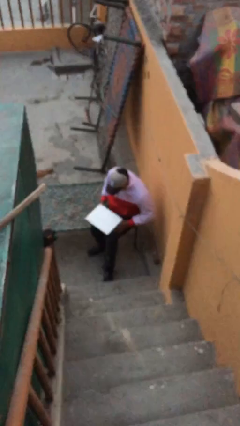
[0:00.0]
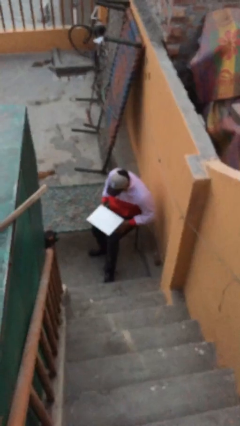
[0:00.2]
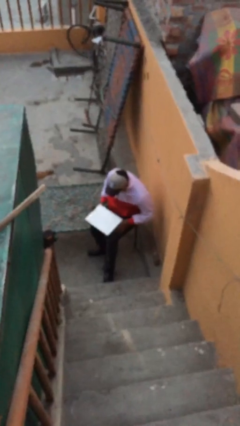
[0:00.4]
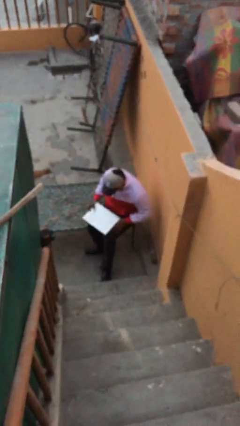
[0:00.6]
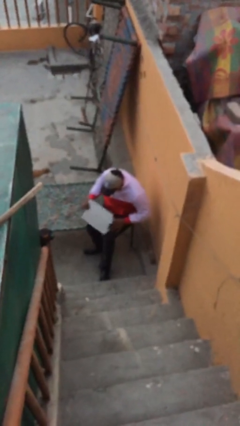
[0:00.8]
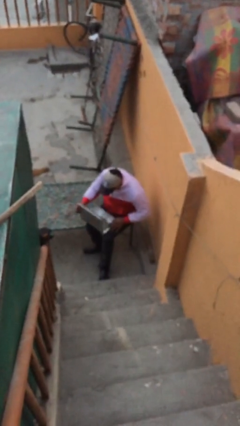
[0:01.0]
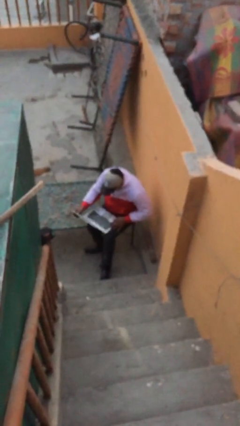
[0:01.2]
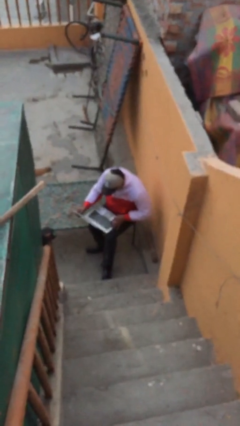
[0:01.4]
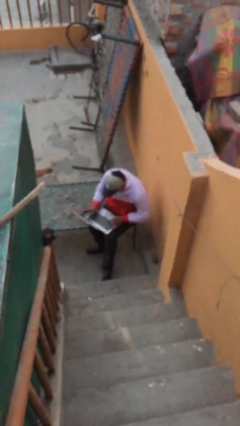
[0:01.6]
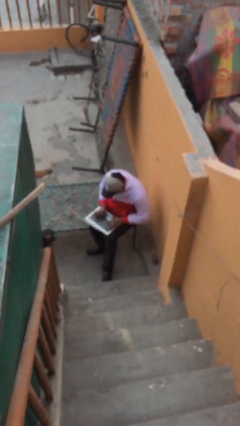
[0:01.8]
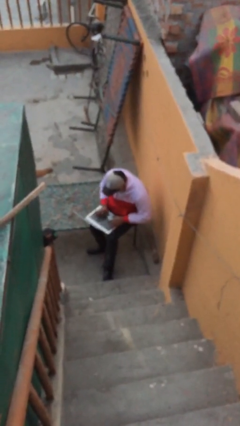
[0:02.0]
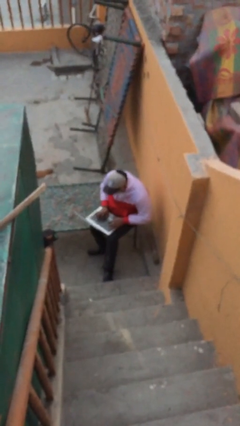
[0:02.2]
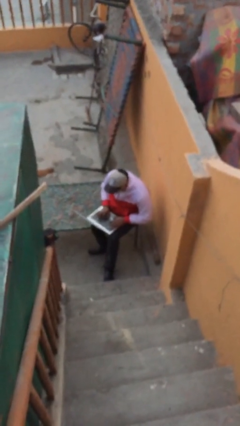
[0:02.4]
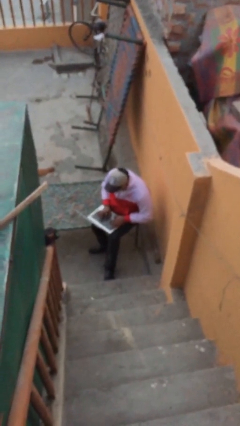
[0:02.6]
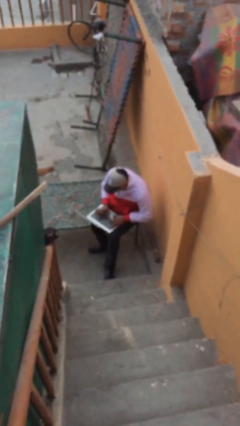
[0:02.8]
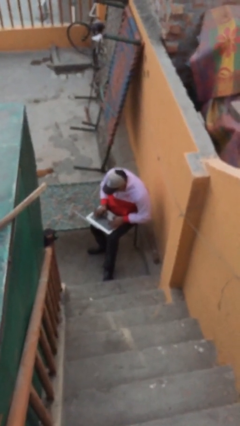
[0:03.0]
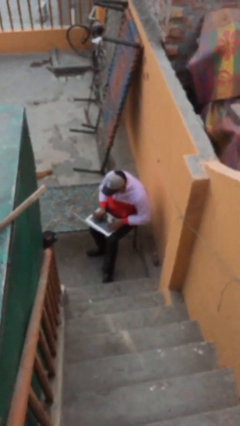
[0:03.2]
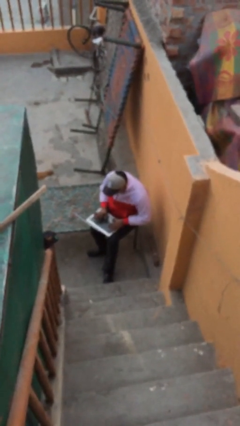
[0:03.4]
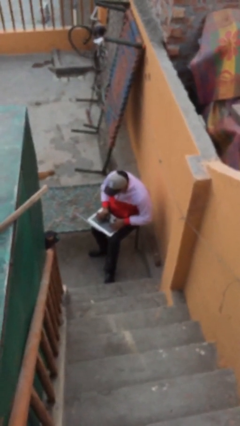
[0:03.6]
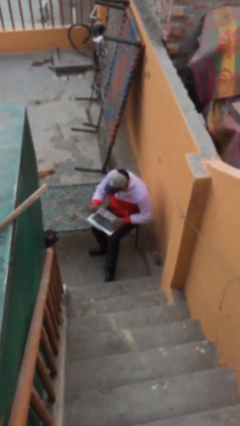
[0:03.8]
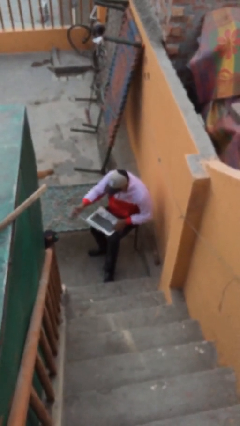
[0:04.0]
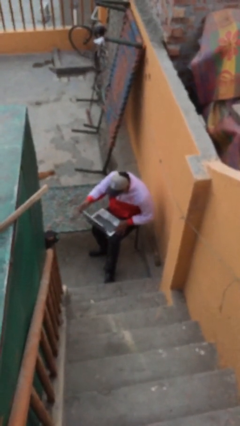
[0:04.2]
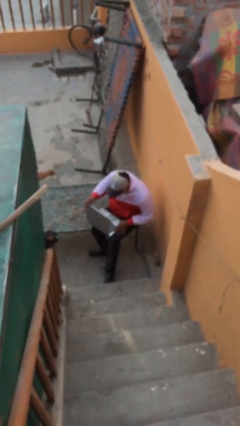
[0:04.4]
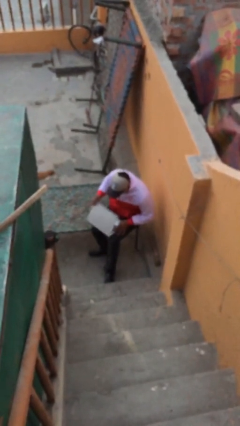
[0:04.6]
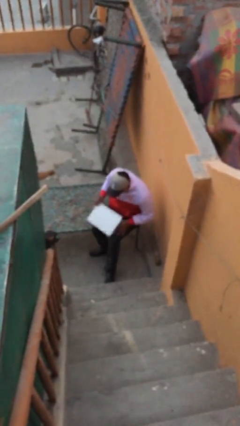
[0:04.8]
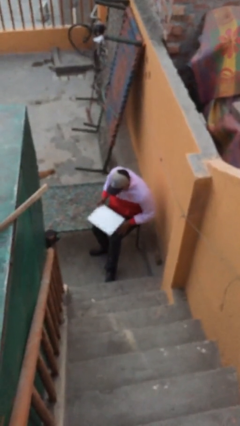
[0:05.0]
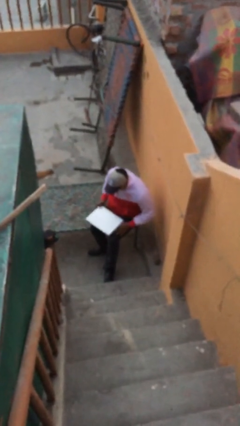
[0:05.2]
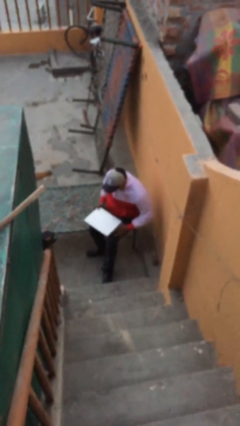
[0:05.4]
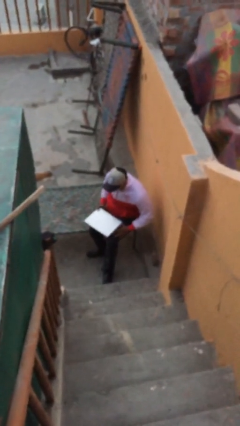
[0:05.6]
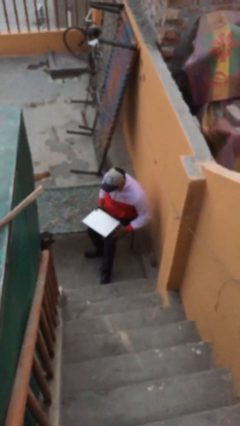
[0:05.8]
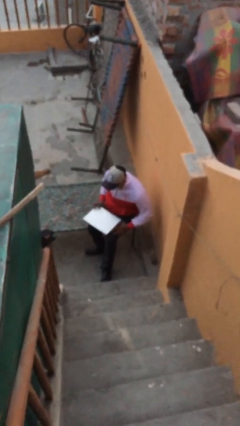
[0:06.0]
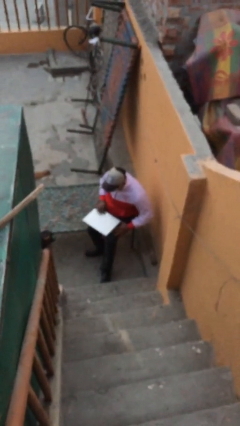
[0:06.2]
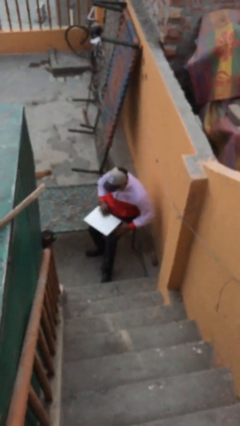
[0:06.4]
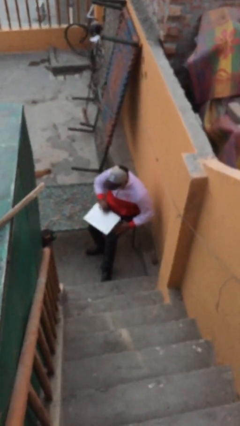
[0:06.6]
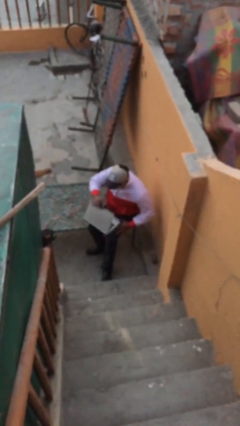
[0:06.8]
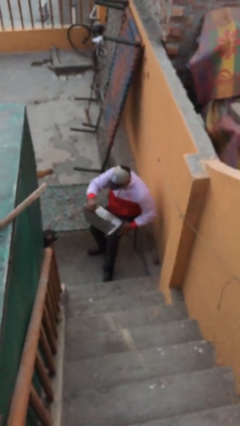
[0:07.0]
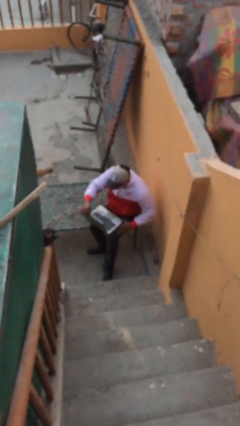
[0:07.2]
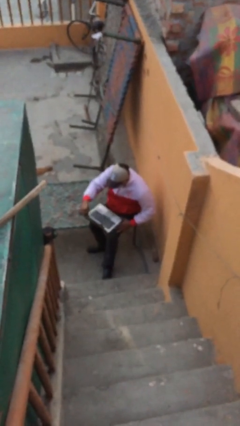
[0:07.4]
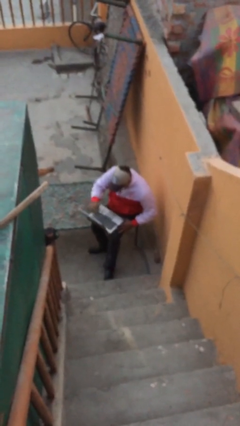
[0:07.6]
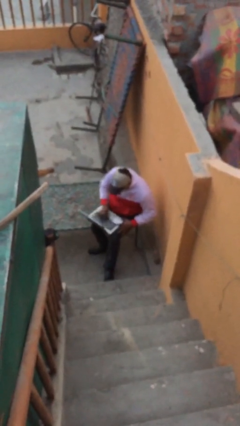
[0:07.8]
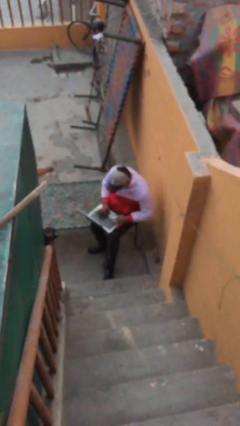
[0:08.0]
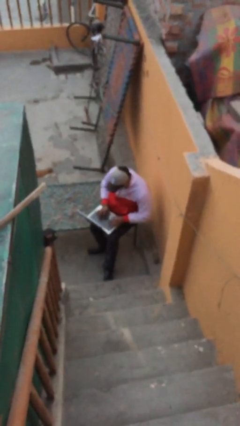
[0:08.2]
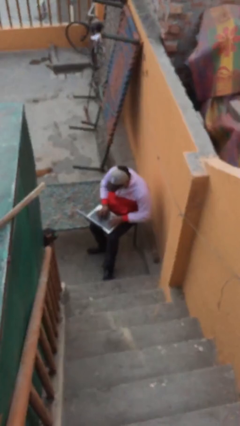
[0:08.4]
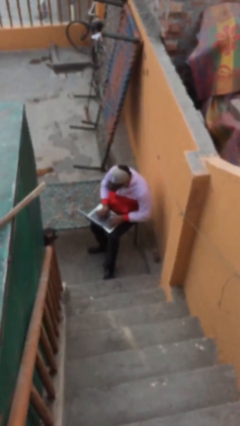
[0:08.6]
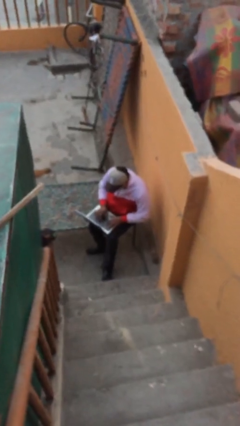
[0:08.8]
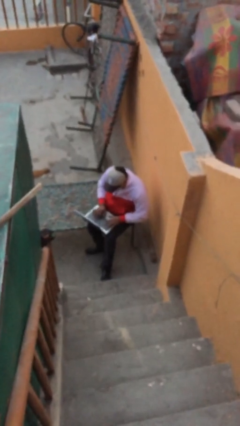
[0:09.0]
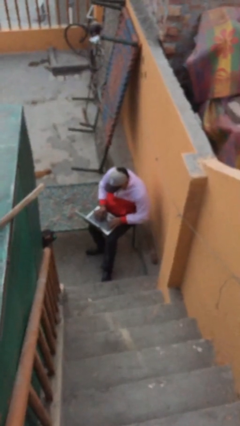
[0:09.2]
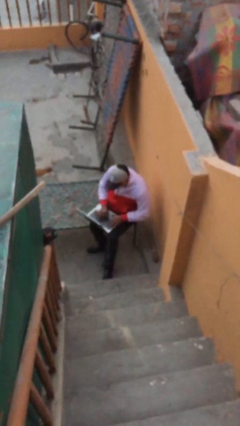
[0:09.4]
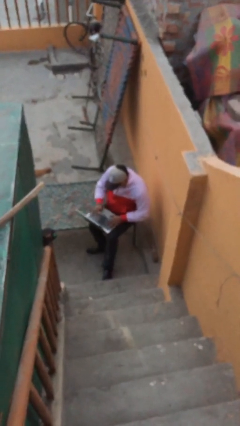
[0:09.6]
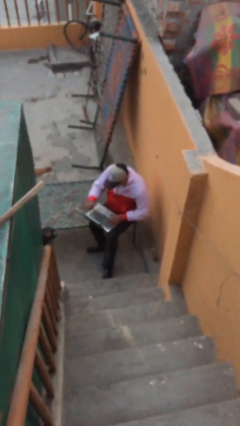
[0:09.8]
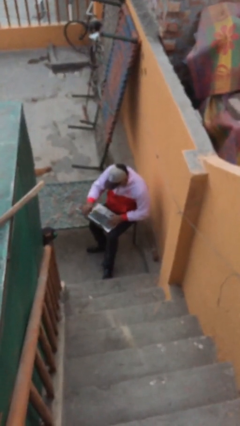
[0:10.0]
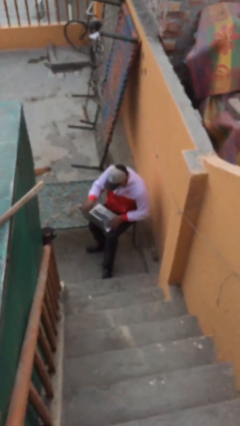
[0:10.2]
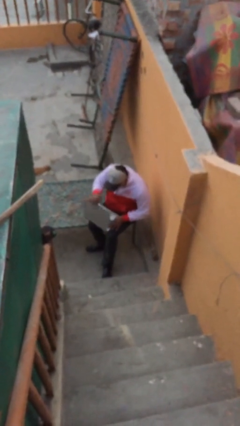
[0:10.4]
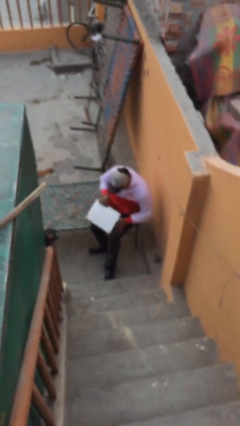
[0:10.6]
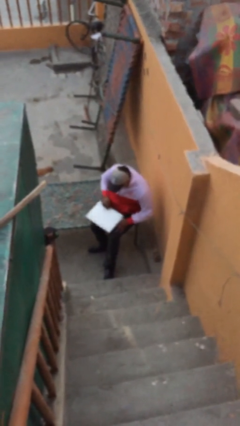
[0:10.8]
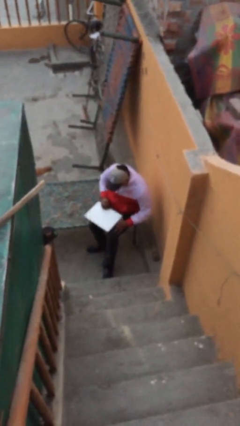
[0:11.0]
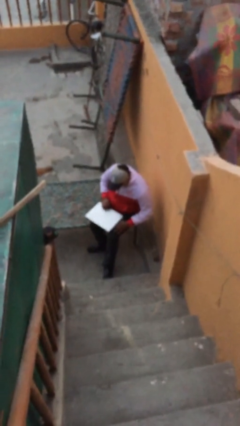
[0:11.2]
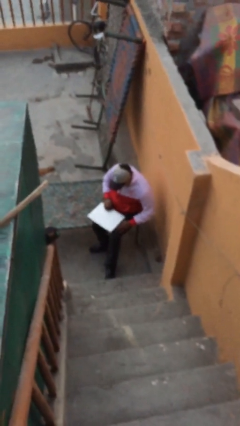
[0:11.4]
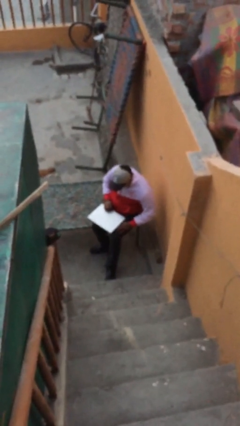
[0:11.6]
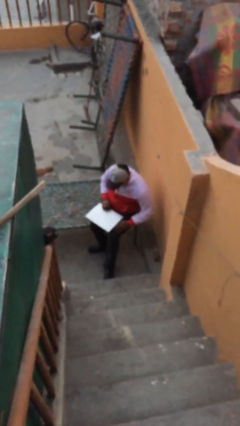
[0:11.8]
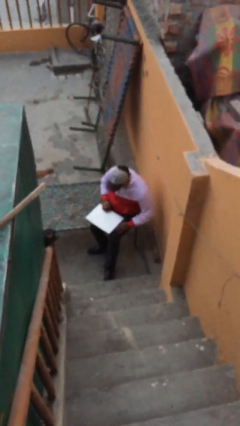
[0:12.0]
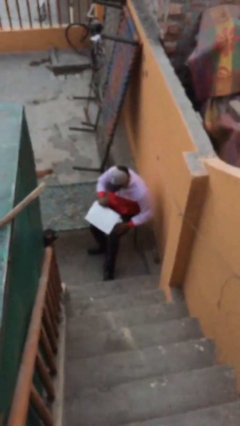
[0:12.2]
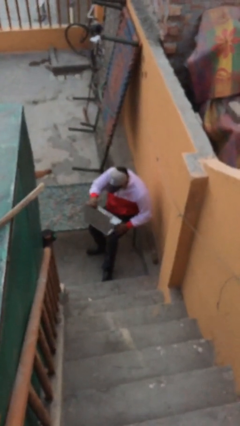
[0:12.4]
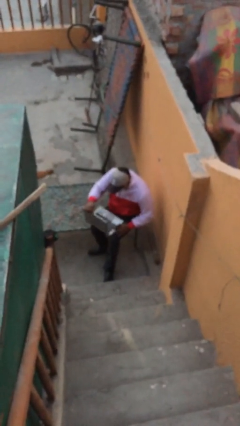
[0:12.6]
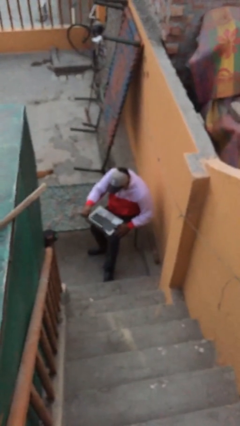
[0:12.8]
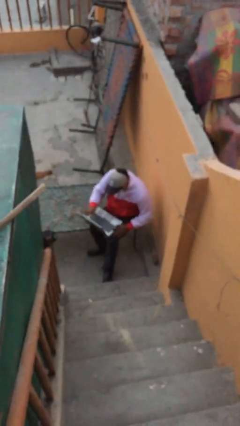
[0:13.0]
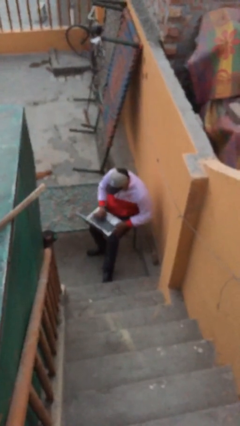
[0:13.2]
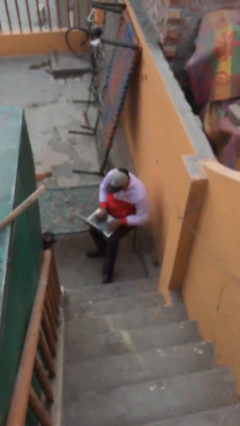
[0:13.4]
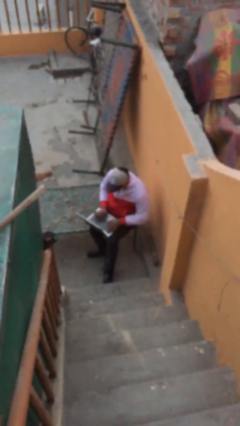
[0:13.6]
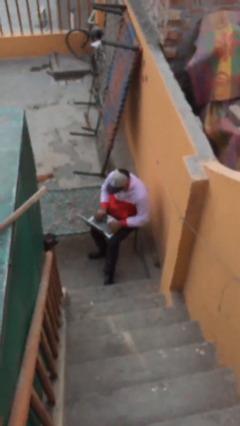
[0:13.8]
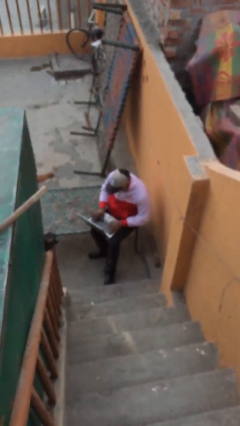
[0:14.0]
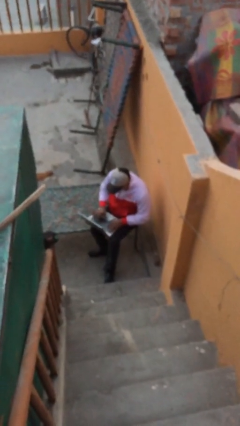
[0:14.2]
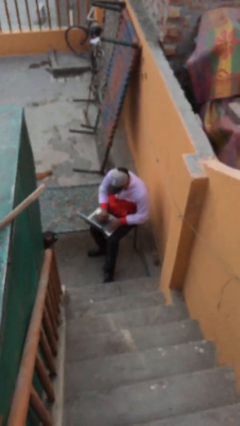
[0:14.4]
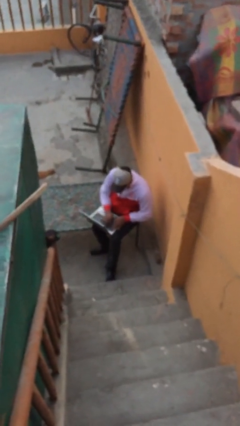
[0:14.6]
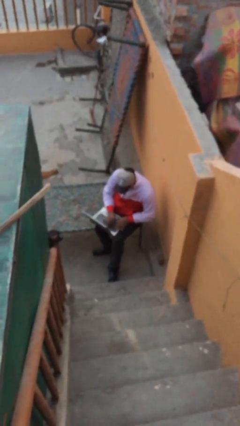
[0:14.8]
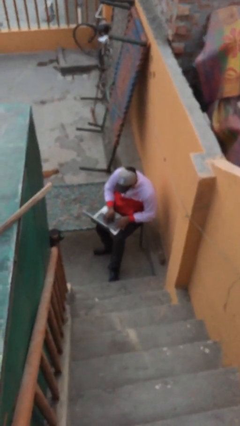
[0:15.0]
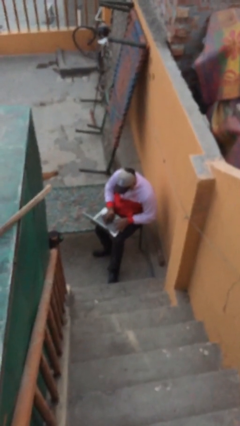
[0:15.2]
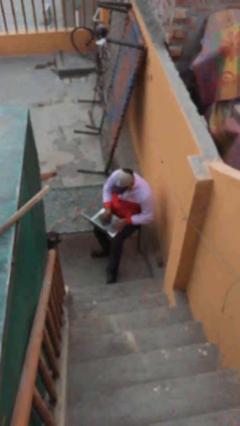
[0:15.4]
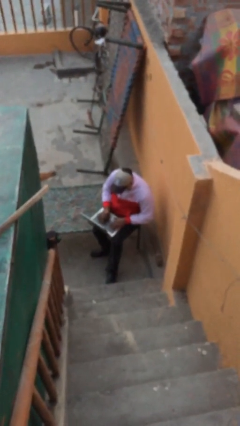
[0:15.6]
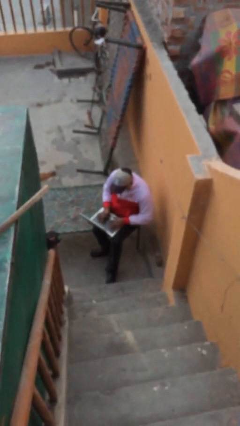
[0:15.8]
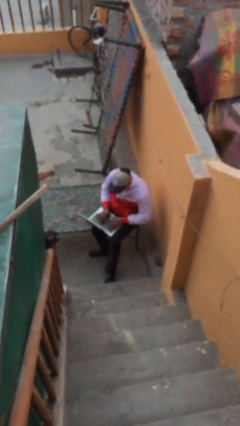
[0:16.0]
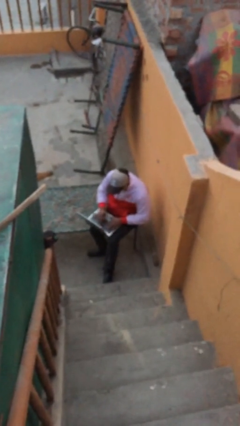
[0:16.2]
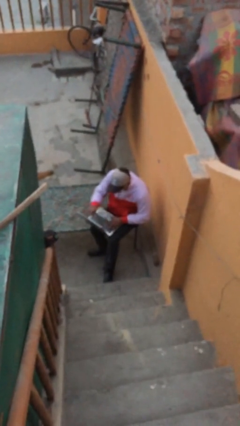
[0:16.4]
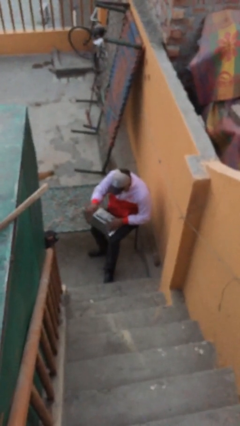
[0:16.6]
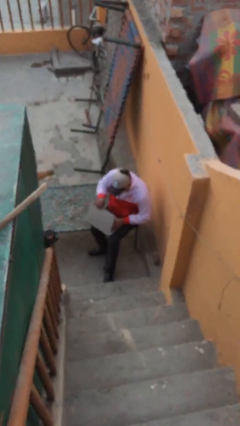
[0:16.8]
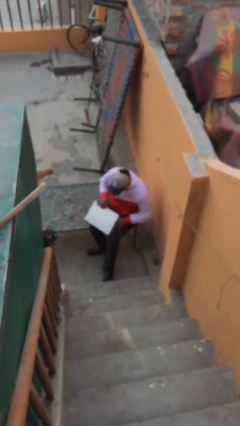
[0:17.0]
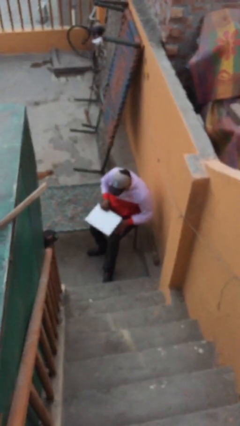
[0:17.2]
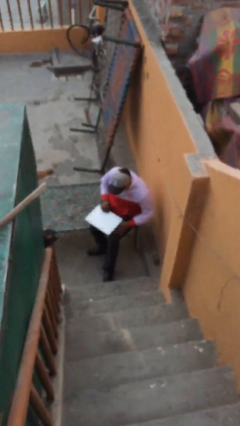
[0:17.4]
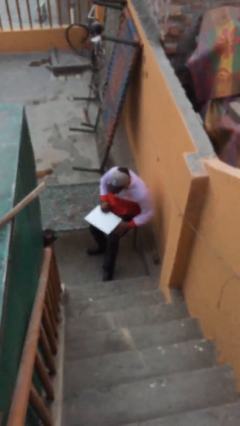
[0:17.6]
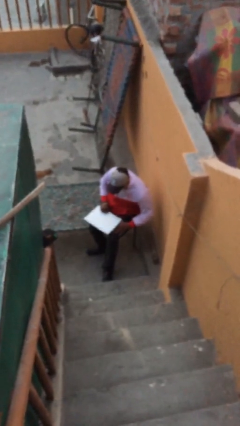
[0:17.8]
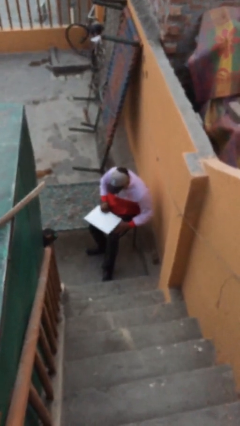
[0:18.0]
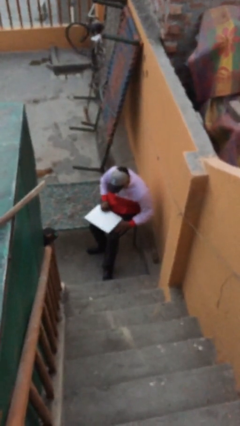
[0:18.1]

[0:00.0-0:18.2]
person interacts with laptop
